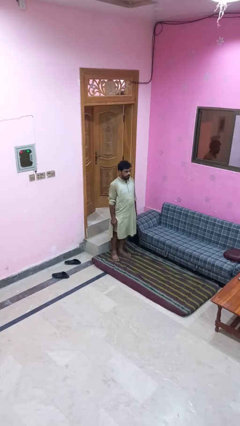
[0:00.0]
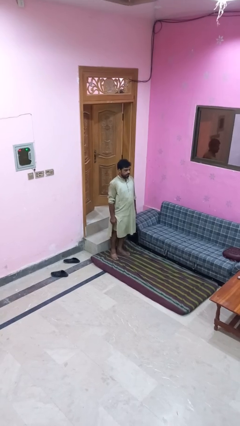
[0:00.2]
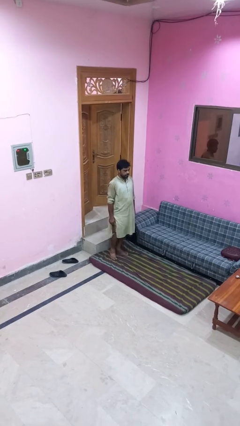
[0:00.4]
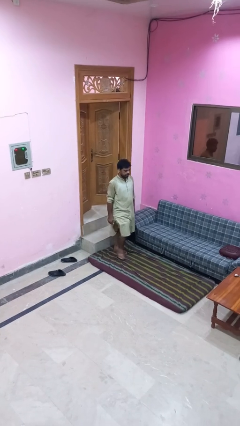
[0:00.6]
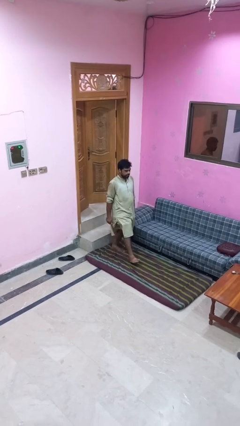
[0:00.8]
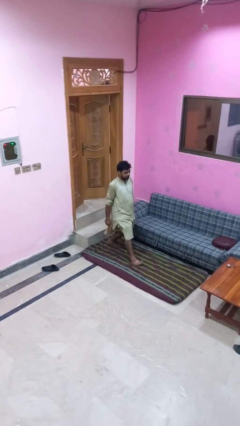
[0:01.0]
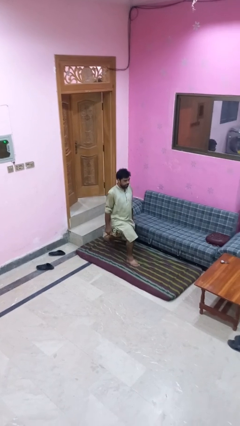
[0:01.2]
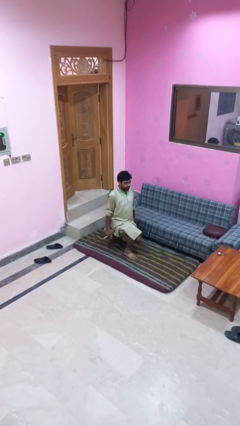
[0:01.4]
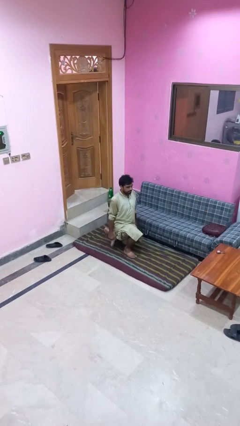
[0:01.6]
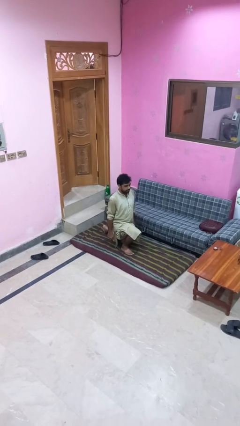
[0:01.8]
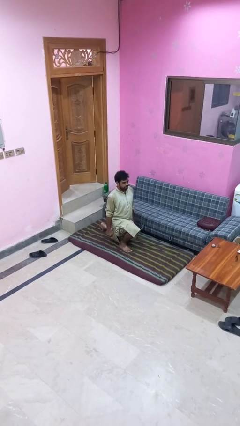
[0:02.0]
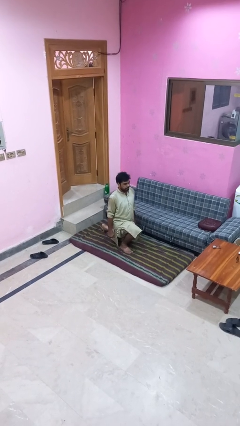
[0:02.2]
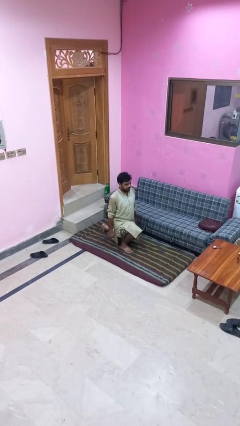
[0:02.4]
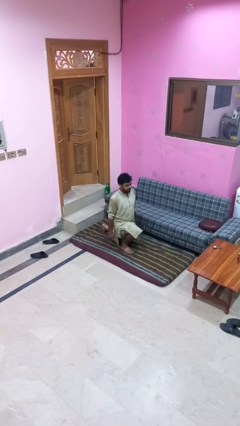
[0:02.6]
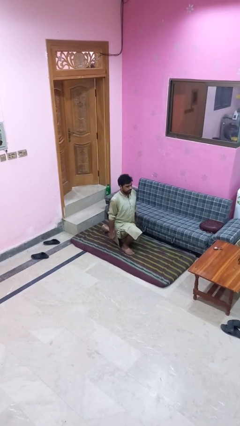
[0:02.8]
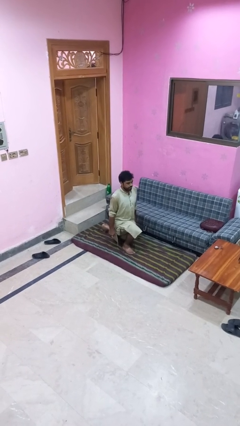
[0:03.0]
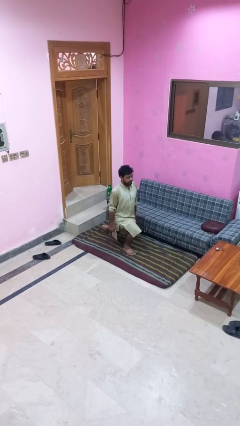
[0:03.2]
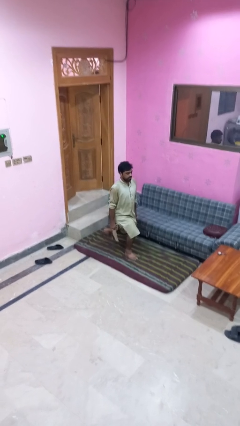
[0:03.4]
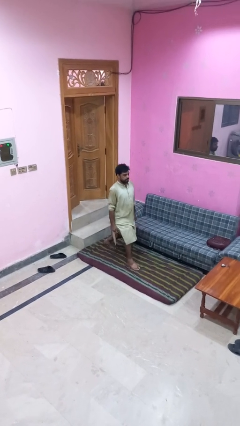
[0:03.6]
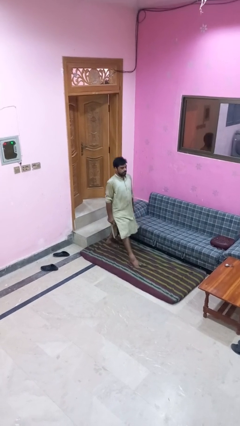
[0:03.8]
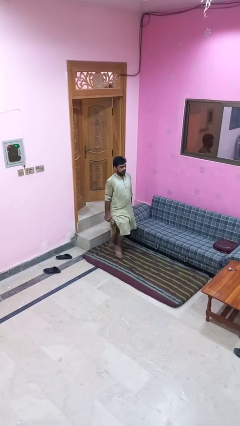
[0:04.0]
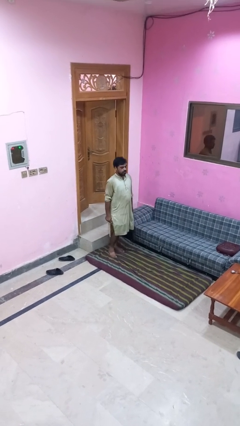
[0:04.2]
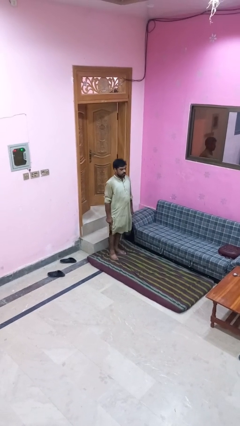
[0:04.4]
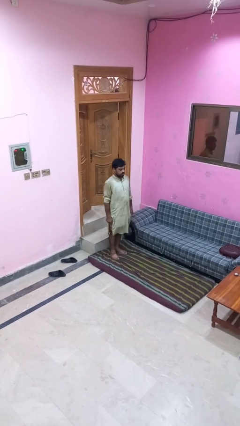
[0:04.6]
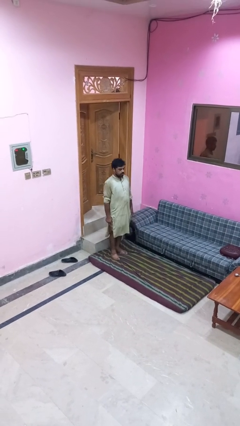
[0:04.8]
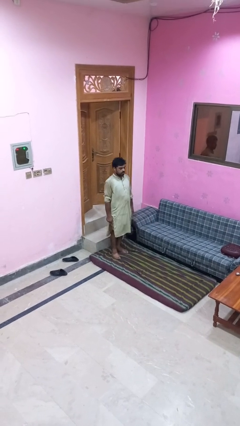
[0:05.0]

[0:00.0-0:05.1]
person exercises with lunges

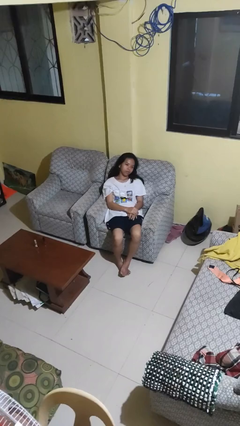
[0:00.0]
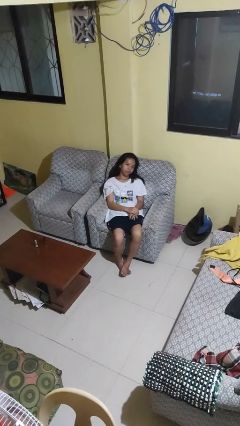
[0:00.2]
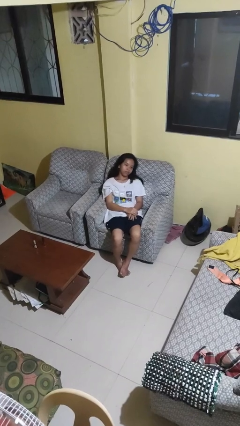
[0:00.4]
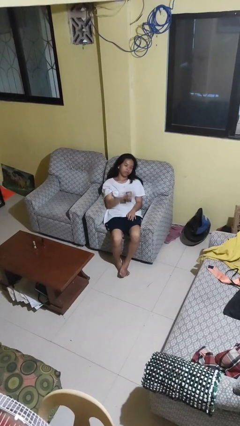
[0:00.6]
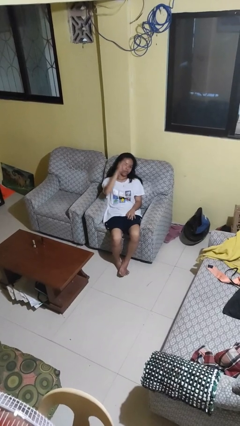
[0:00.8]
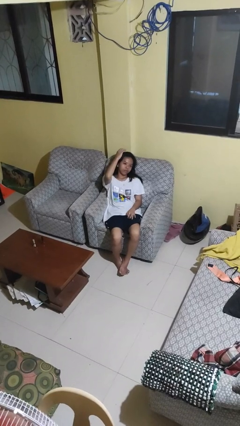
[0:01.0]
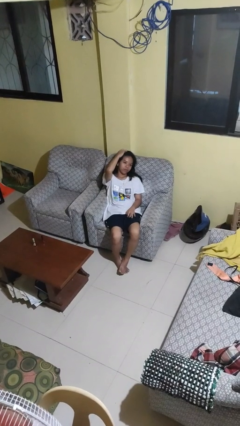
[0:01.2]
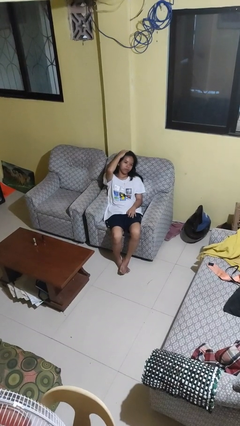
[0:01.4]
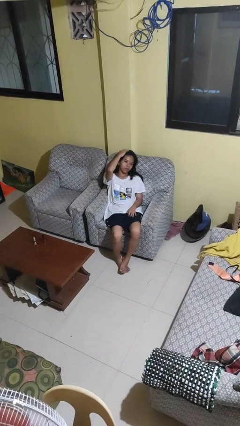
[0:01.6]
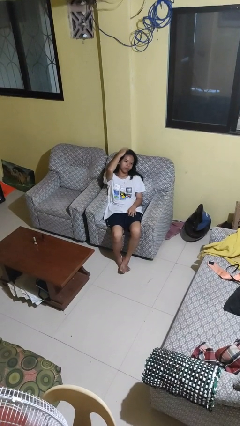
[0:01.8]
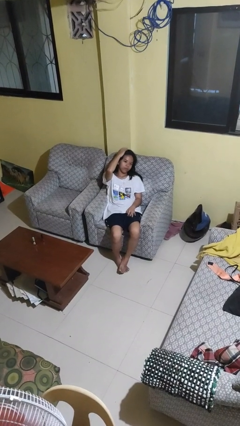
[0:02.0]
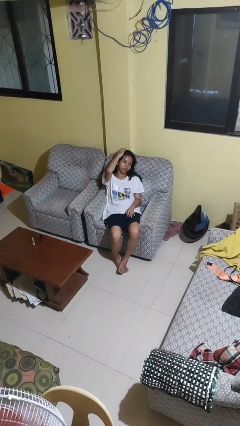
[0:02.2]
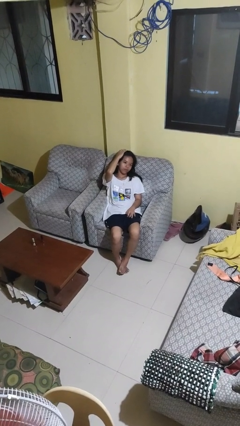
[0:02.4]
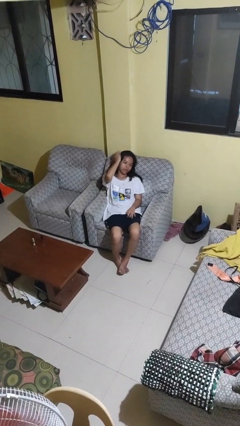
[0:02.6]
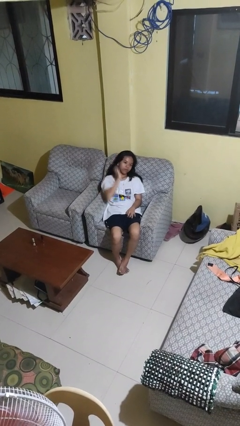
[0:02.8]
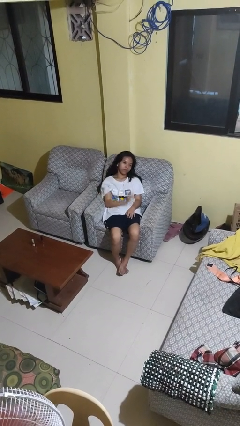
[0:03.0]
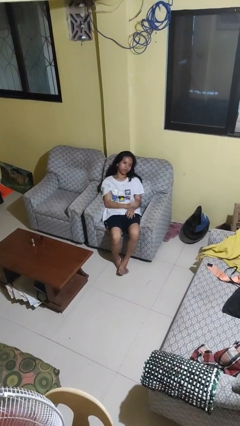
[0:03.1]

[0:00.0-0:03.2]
person pats head

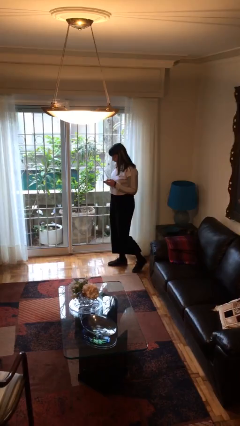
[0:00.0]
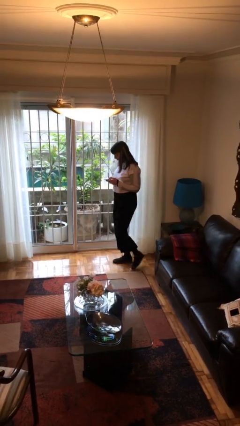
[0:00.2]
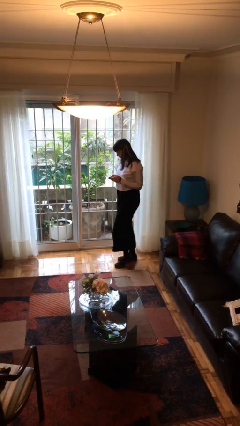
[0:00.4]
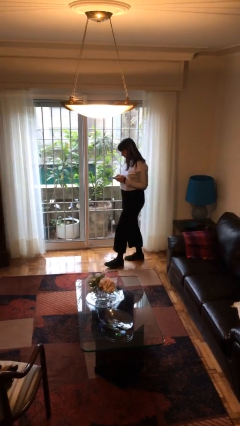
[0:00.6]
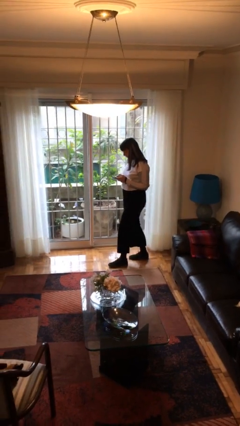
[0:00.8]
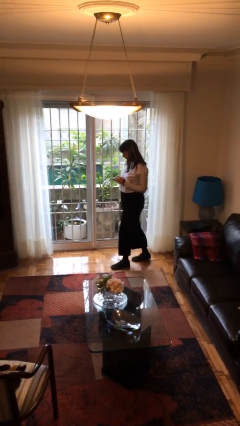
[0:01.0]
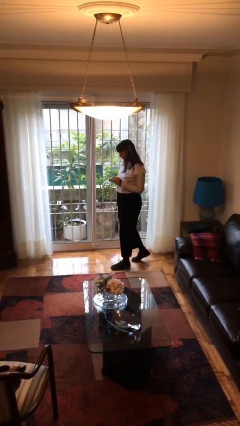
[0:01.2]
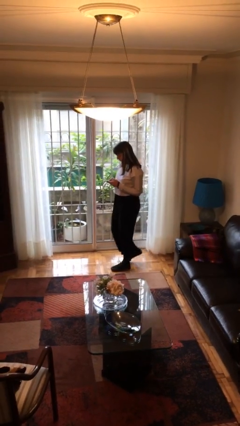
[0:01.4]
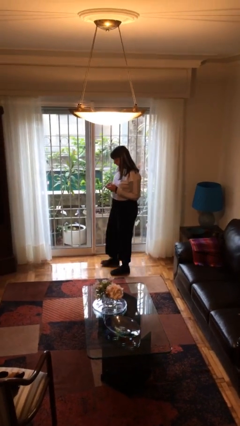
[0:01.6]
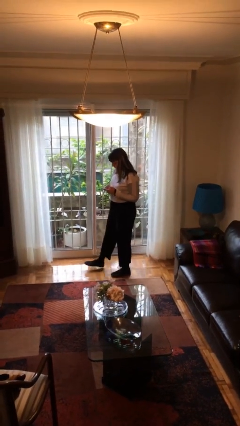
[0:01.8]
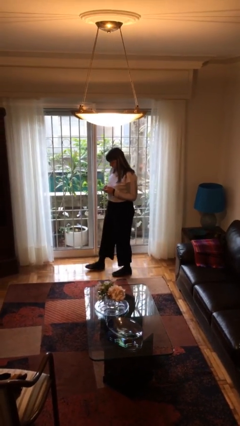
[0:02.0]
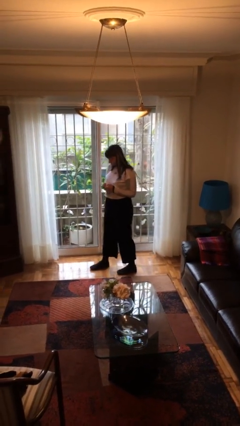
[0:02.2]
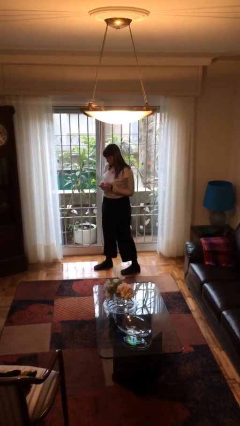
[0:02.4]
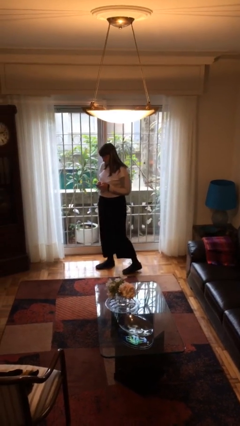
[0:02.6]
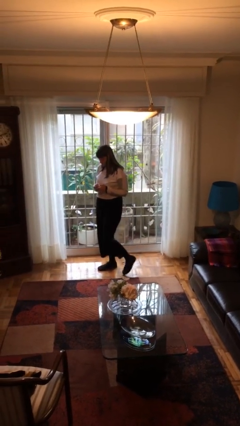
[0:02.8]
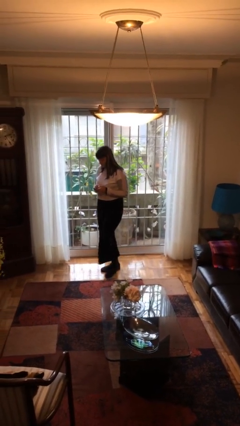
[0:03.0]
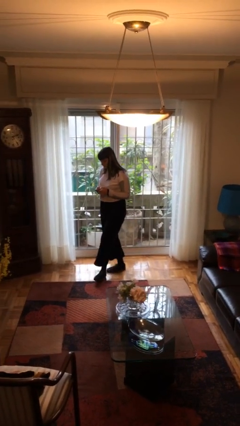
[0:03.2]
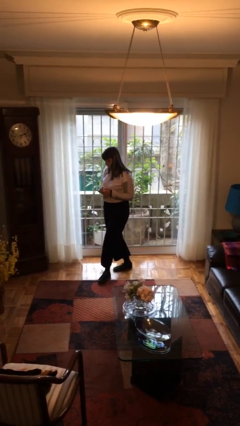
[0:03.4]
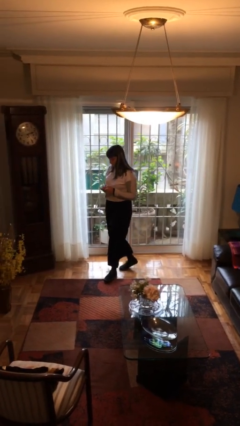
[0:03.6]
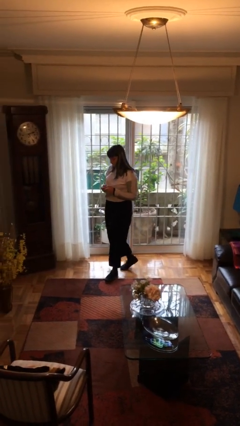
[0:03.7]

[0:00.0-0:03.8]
person texts on phone

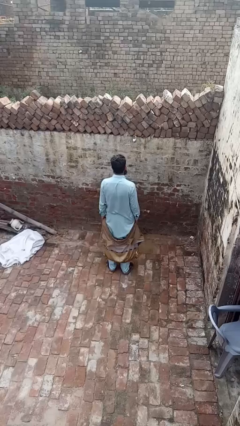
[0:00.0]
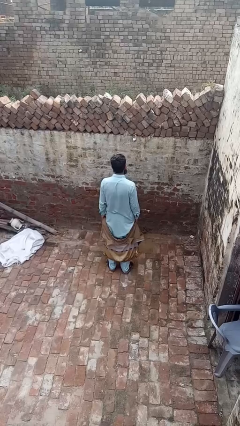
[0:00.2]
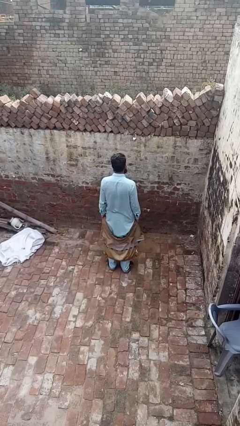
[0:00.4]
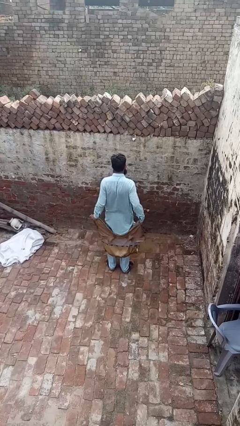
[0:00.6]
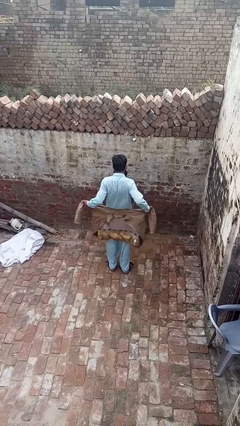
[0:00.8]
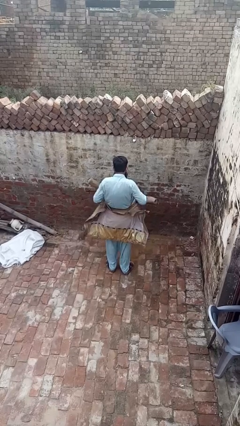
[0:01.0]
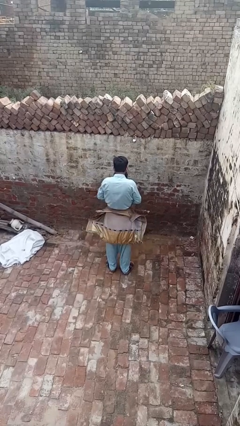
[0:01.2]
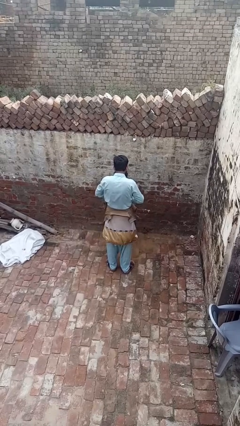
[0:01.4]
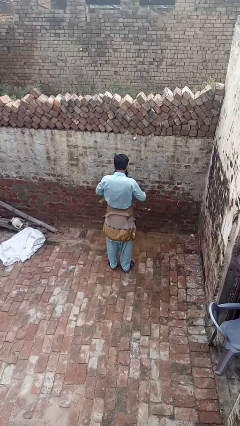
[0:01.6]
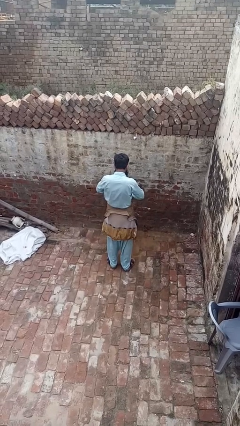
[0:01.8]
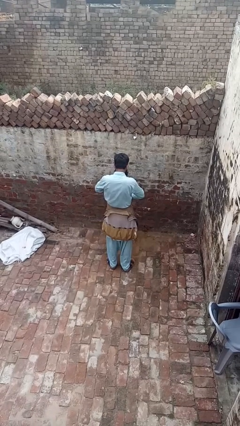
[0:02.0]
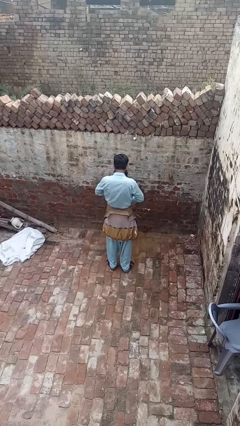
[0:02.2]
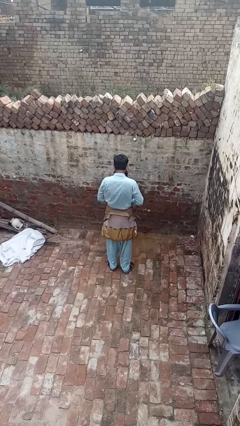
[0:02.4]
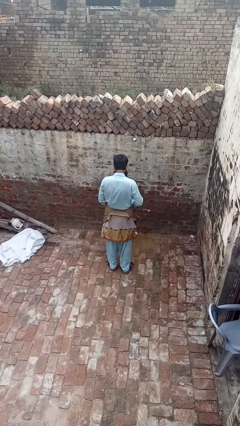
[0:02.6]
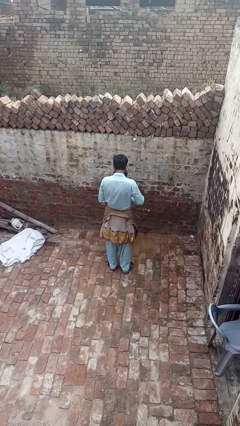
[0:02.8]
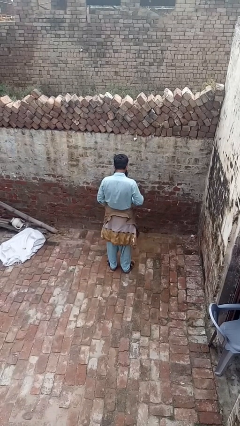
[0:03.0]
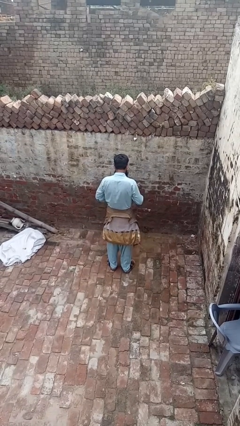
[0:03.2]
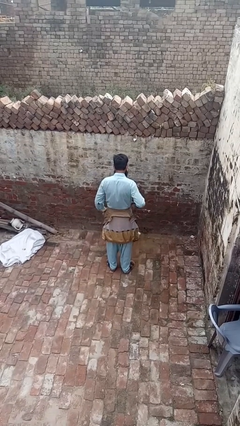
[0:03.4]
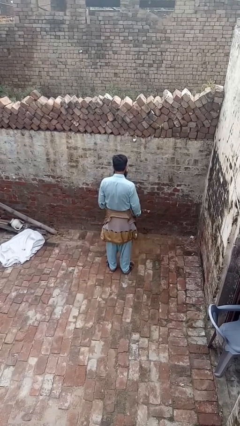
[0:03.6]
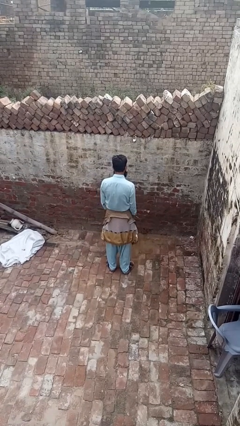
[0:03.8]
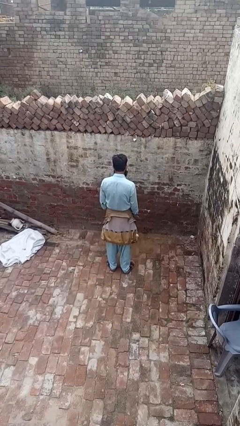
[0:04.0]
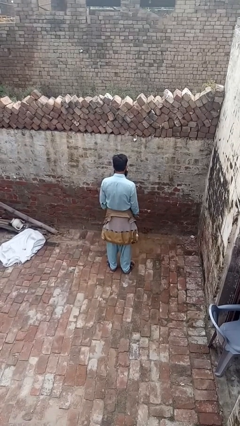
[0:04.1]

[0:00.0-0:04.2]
person ties jacket around waist

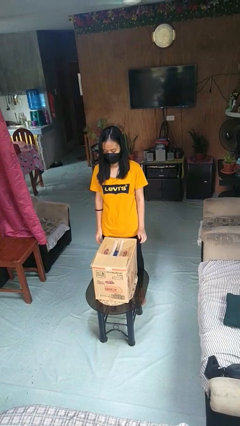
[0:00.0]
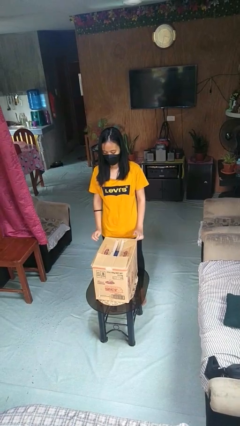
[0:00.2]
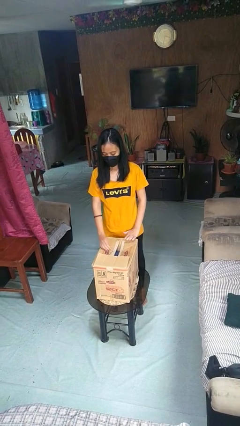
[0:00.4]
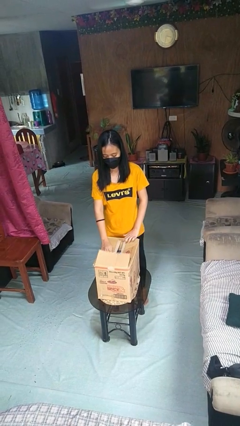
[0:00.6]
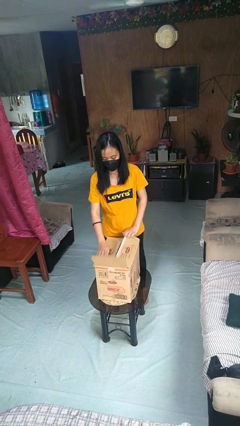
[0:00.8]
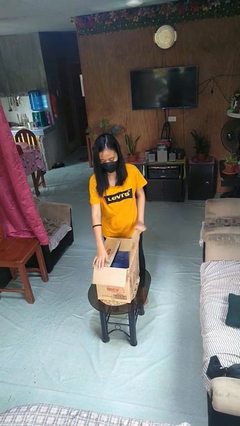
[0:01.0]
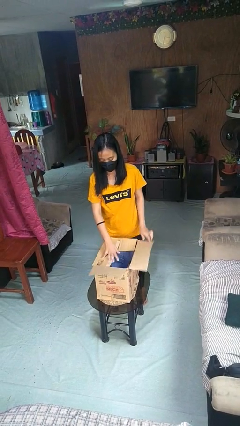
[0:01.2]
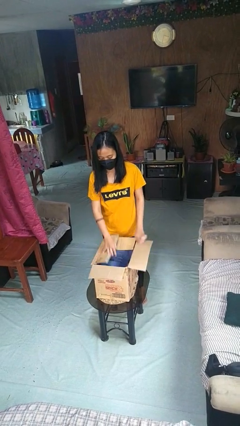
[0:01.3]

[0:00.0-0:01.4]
person opens box
